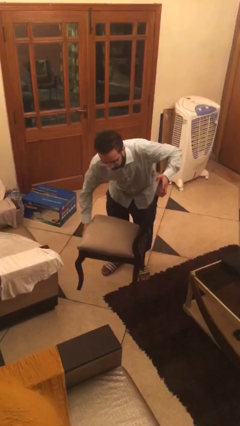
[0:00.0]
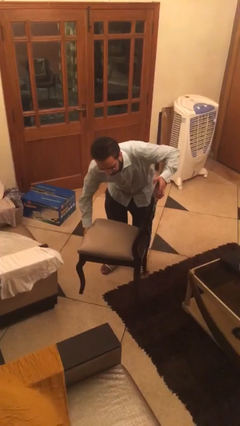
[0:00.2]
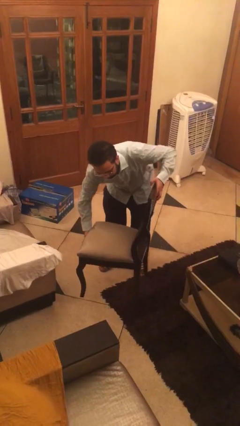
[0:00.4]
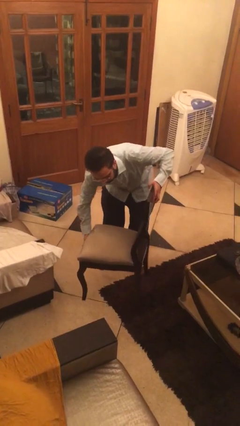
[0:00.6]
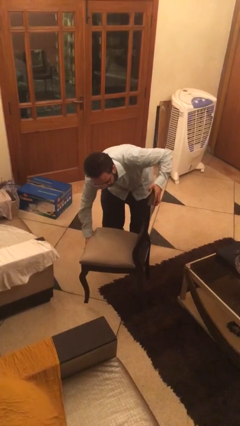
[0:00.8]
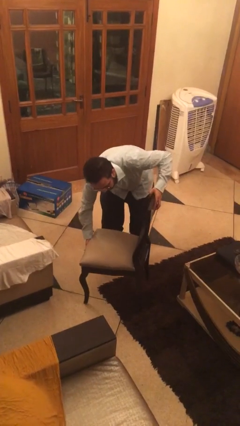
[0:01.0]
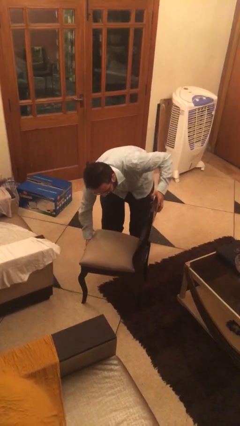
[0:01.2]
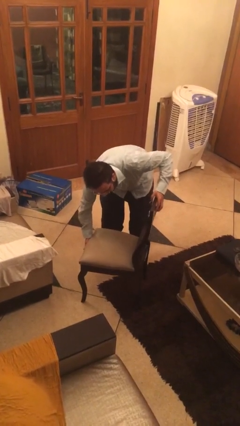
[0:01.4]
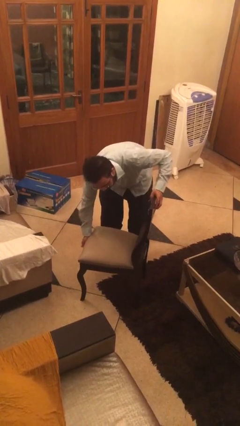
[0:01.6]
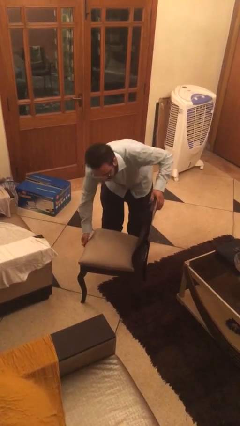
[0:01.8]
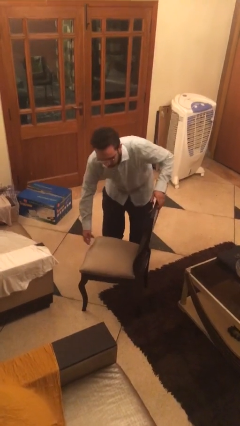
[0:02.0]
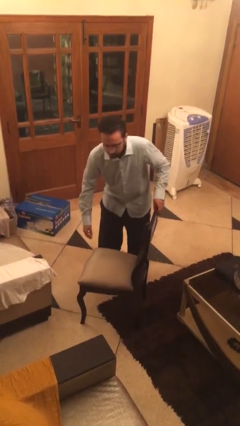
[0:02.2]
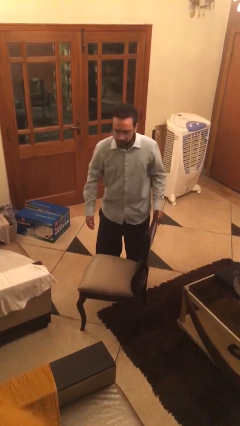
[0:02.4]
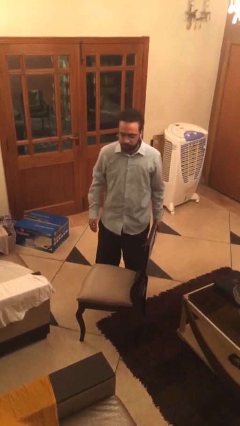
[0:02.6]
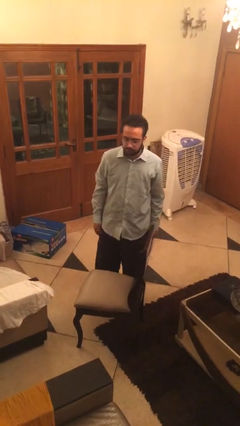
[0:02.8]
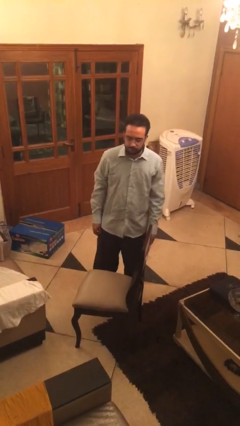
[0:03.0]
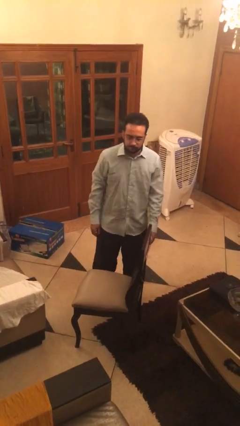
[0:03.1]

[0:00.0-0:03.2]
person puts down object on floor

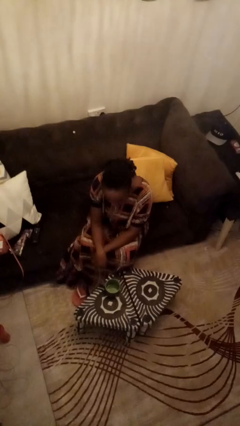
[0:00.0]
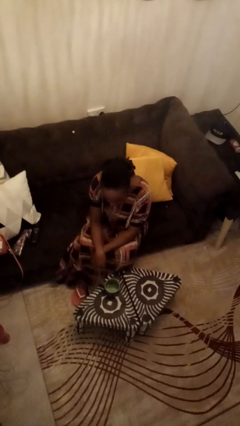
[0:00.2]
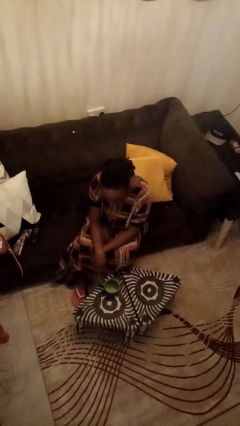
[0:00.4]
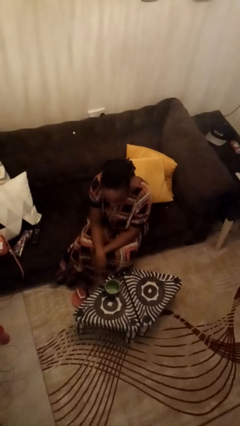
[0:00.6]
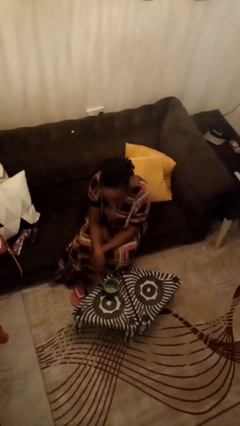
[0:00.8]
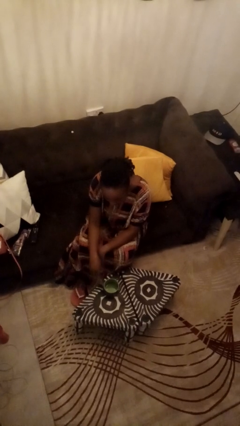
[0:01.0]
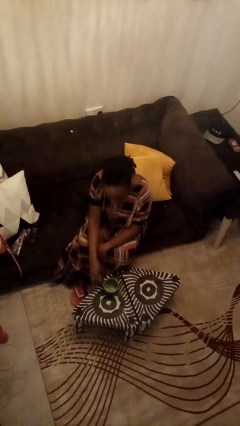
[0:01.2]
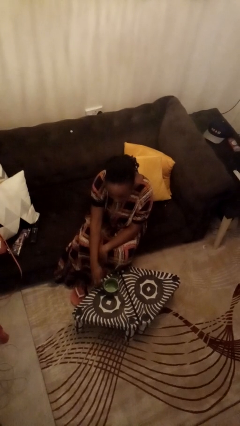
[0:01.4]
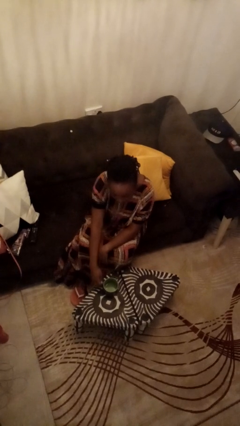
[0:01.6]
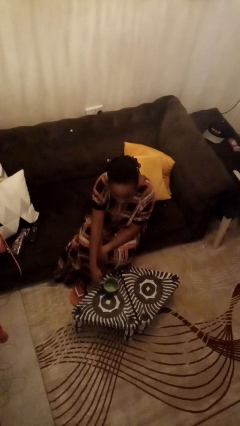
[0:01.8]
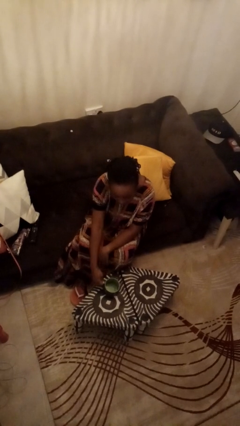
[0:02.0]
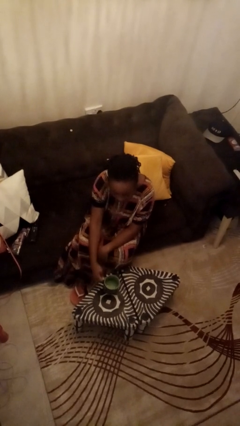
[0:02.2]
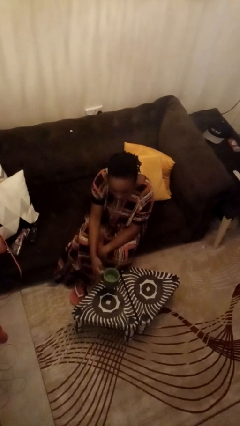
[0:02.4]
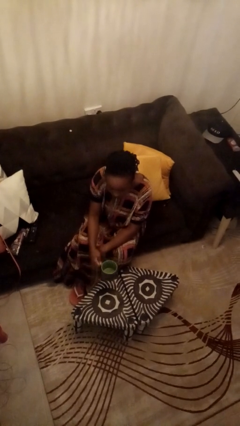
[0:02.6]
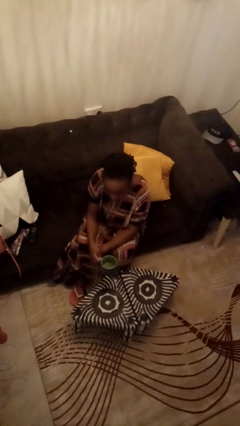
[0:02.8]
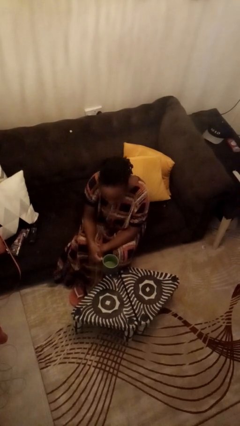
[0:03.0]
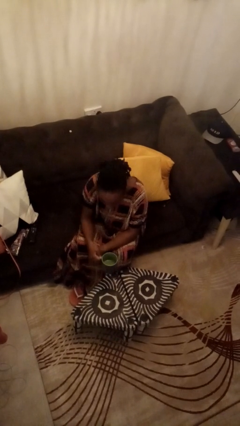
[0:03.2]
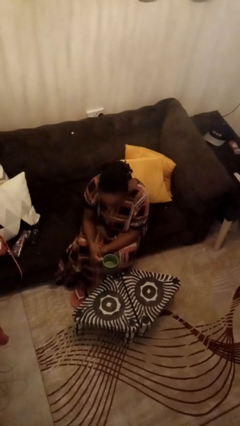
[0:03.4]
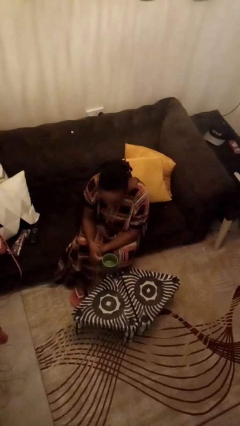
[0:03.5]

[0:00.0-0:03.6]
person picks up object from table

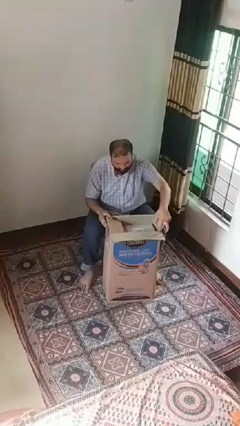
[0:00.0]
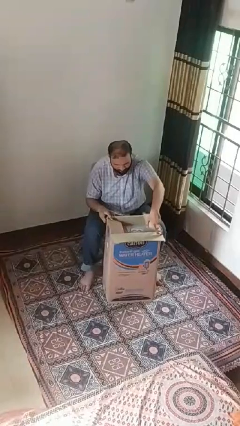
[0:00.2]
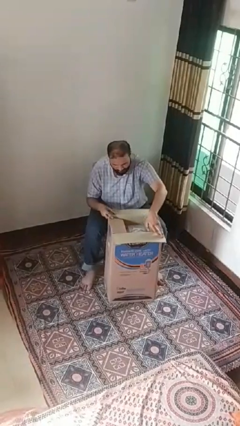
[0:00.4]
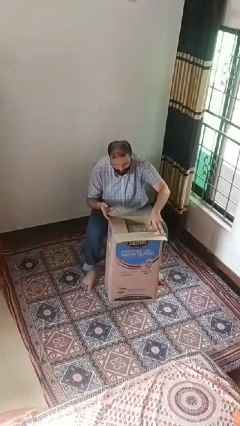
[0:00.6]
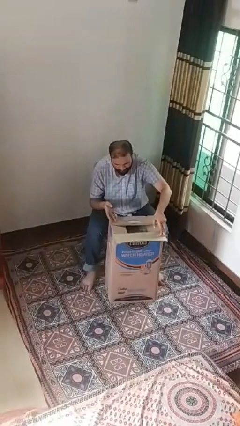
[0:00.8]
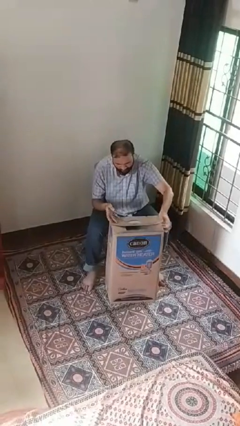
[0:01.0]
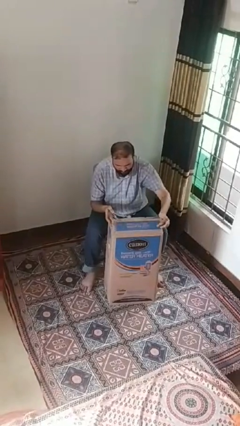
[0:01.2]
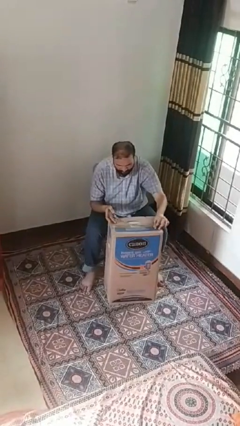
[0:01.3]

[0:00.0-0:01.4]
person closes box

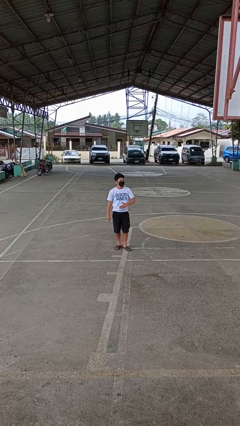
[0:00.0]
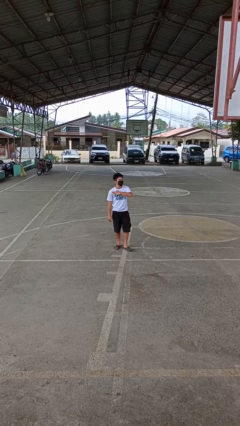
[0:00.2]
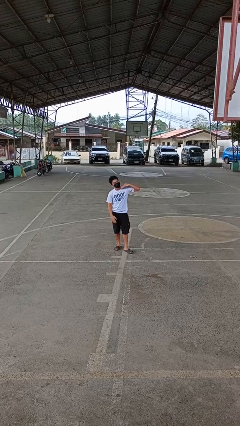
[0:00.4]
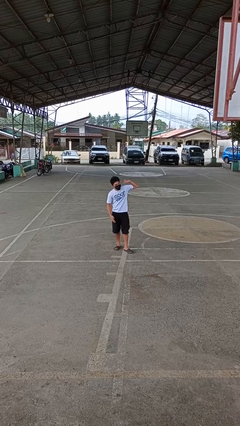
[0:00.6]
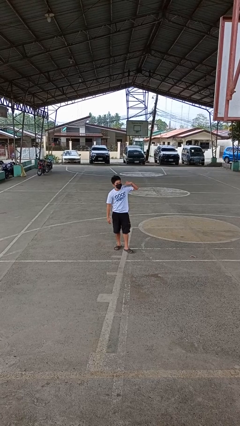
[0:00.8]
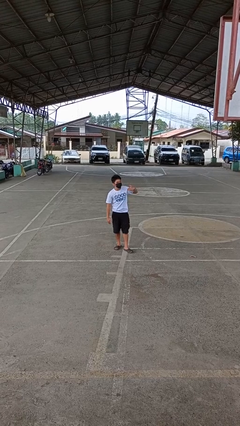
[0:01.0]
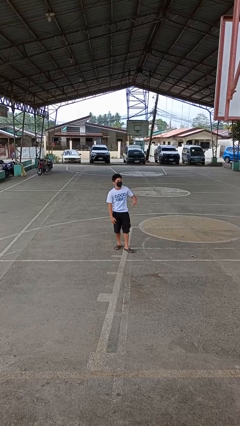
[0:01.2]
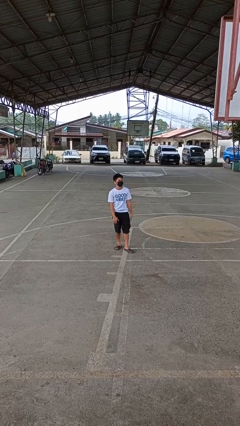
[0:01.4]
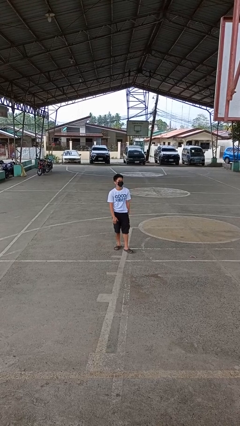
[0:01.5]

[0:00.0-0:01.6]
person gestures cut

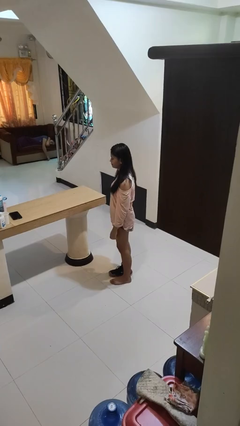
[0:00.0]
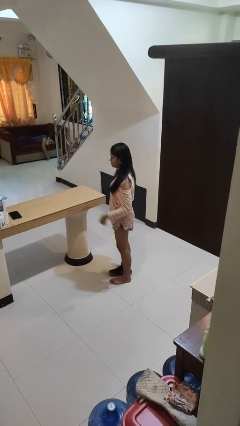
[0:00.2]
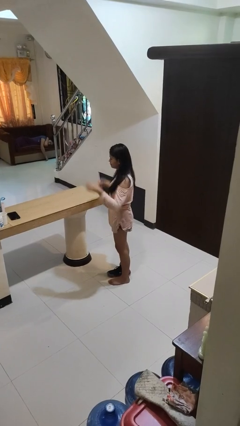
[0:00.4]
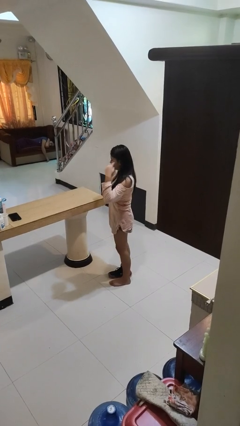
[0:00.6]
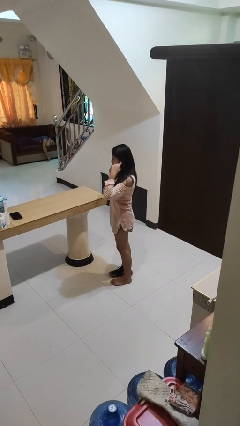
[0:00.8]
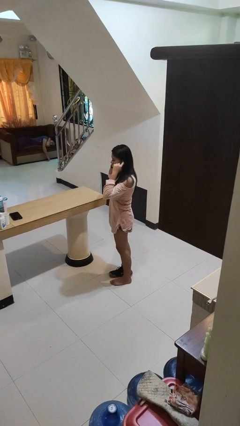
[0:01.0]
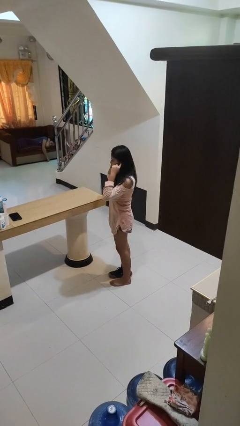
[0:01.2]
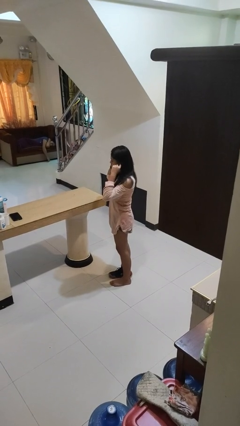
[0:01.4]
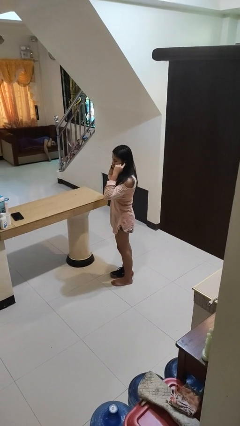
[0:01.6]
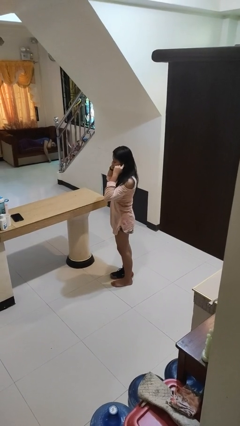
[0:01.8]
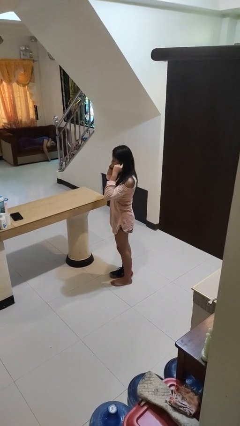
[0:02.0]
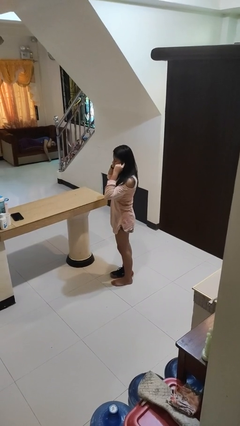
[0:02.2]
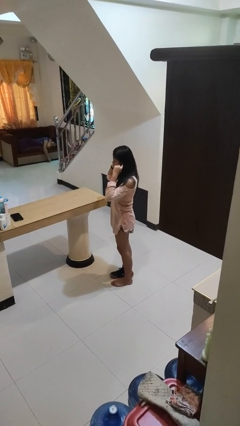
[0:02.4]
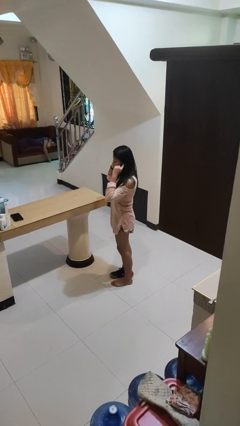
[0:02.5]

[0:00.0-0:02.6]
person puts fingers in ear

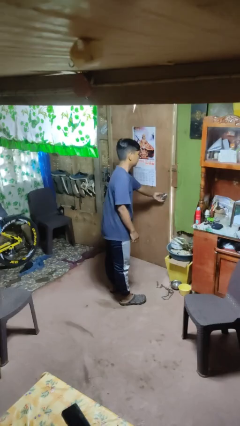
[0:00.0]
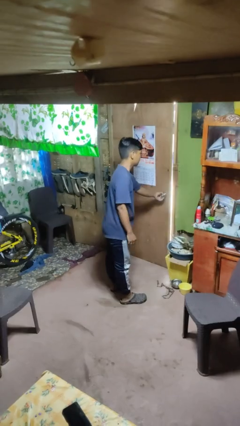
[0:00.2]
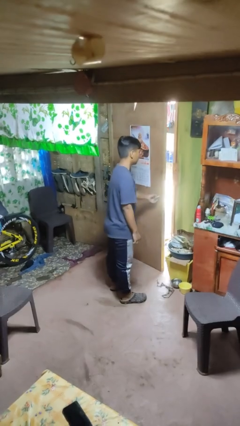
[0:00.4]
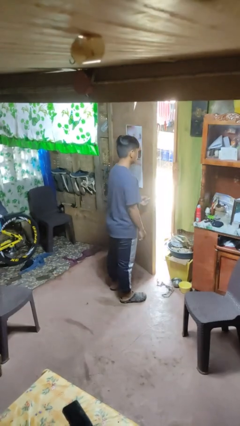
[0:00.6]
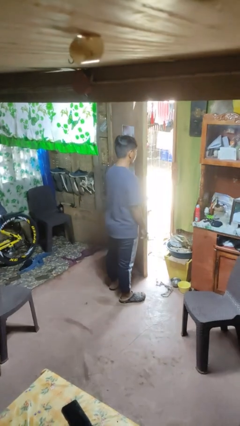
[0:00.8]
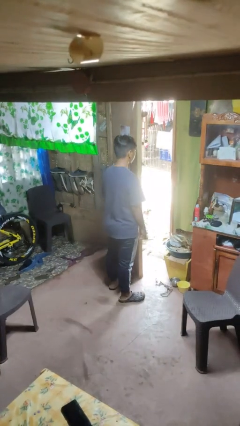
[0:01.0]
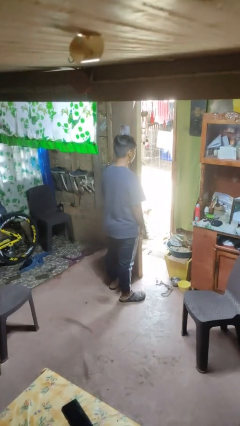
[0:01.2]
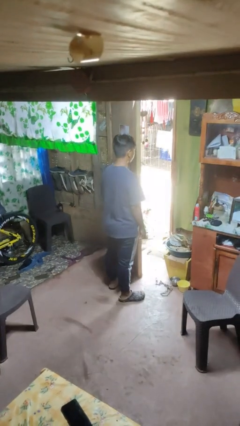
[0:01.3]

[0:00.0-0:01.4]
person opens facility door

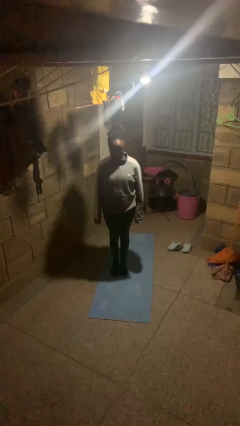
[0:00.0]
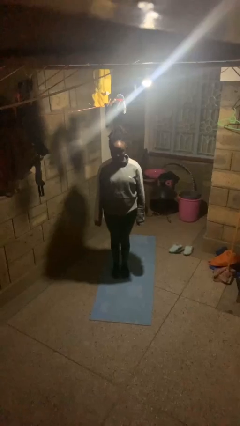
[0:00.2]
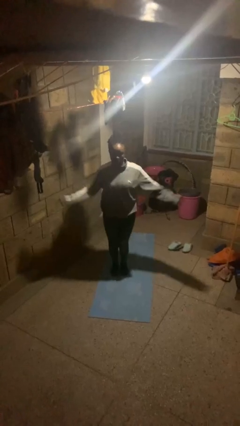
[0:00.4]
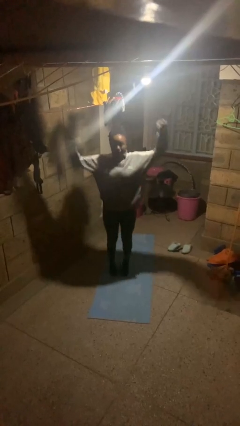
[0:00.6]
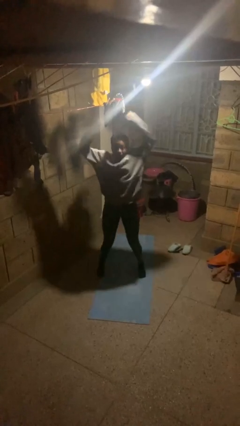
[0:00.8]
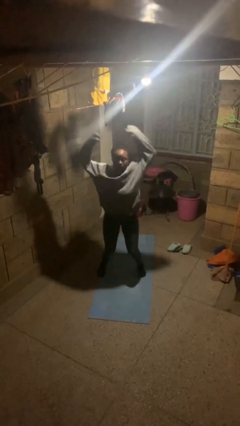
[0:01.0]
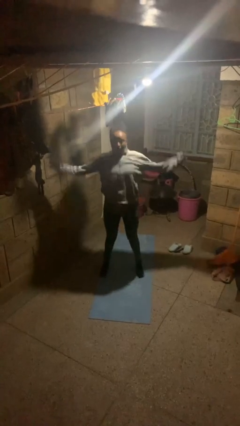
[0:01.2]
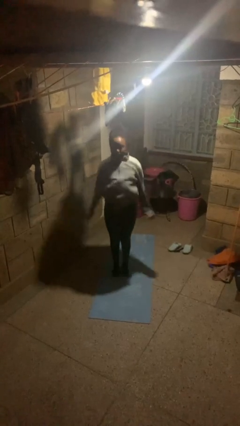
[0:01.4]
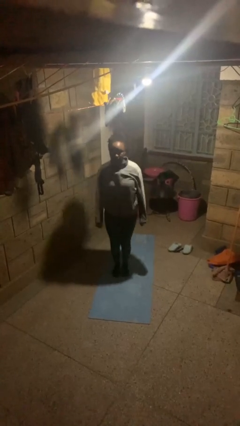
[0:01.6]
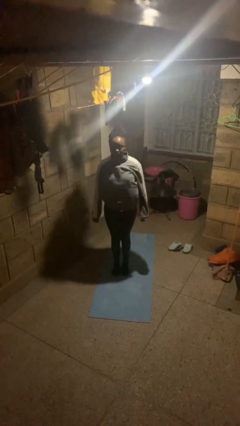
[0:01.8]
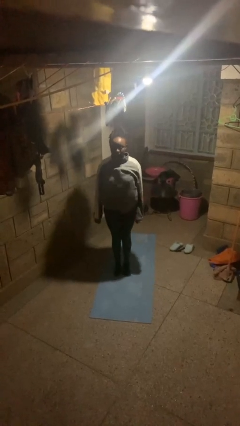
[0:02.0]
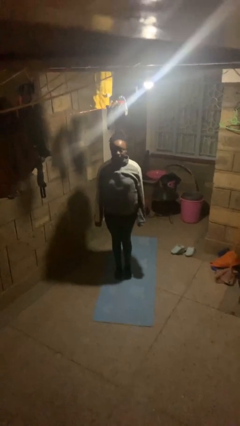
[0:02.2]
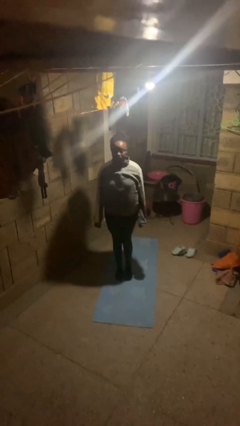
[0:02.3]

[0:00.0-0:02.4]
person exercises with jumping jacks

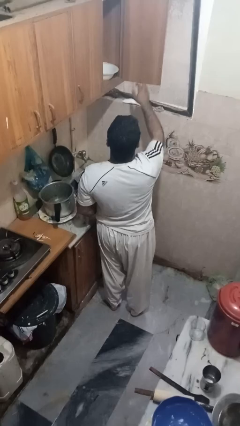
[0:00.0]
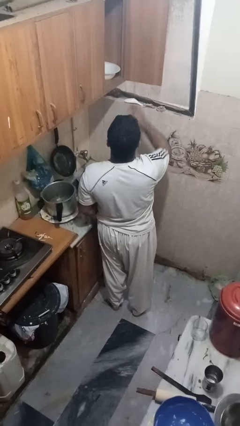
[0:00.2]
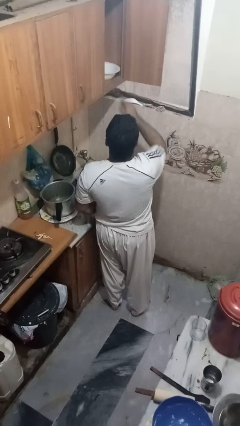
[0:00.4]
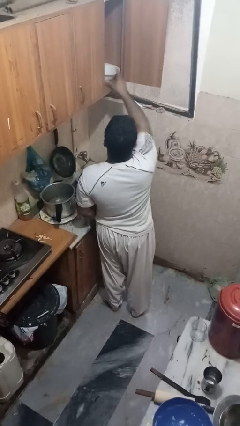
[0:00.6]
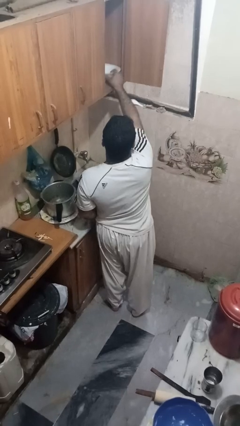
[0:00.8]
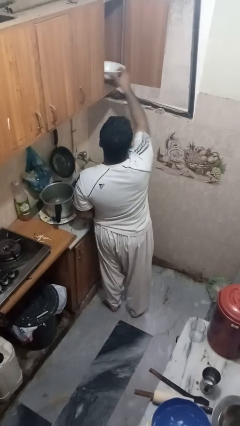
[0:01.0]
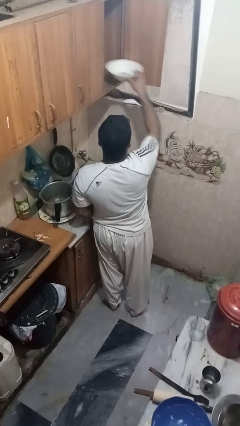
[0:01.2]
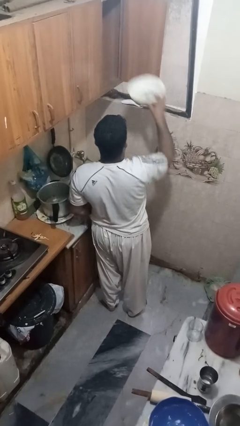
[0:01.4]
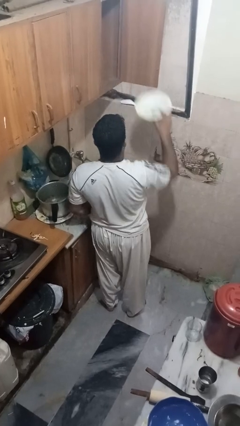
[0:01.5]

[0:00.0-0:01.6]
person takes object from cabinet
